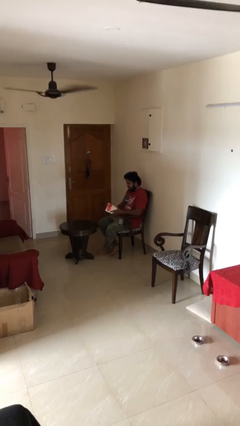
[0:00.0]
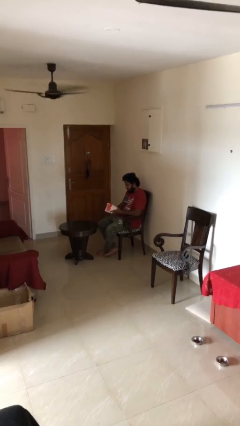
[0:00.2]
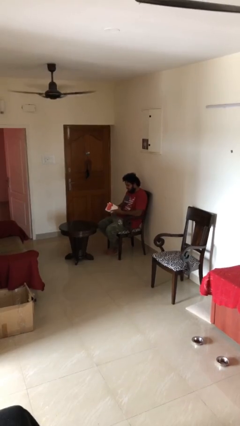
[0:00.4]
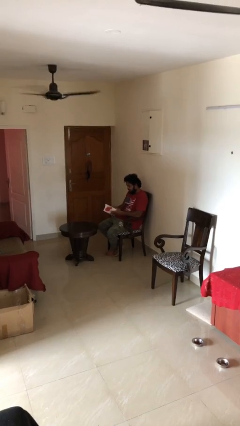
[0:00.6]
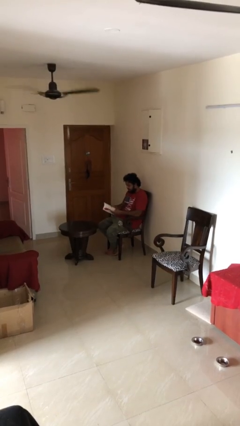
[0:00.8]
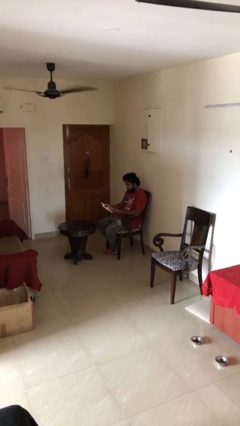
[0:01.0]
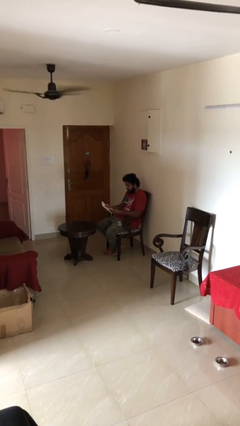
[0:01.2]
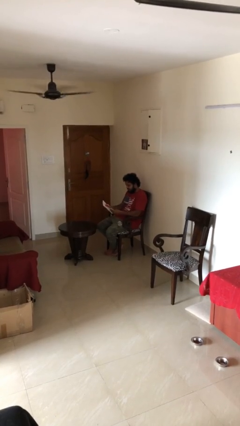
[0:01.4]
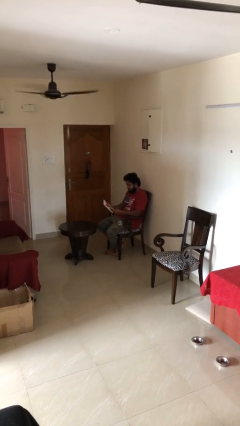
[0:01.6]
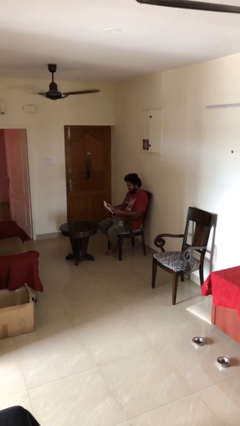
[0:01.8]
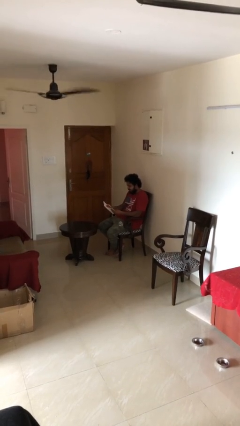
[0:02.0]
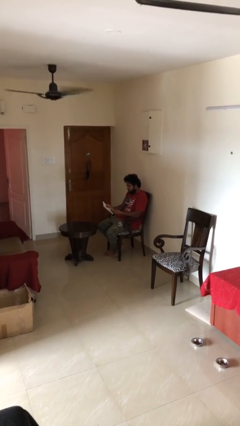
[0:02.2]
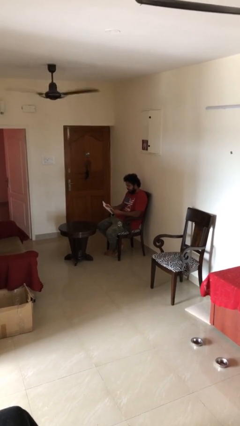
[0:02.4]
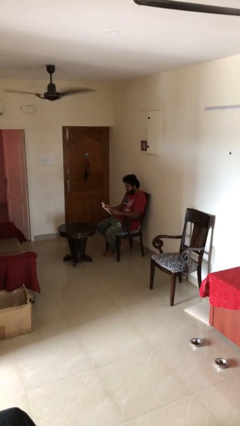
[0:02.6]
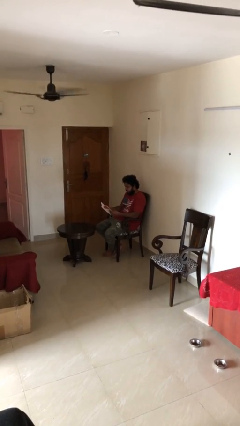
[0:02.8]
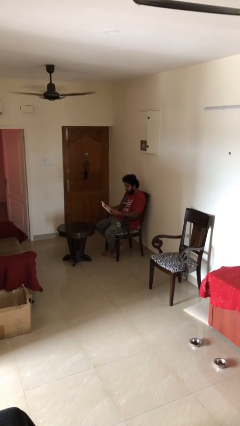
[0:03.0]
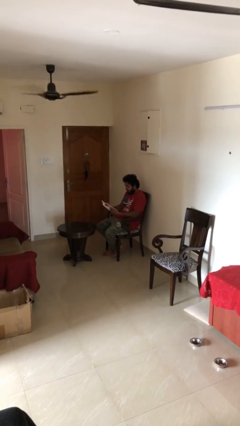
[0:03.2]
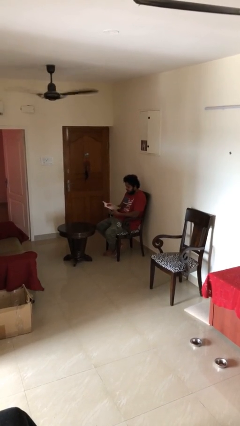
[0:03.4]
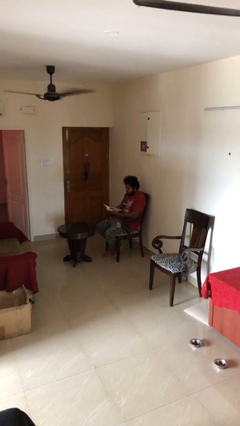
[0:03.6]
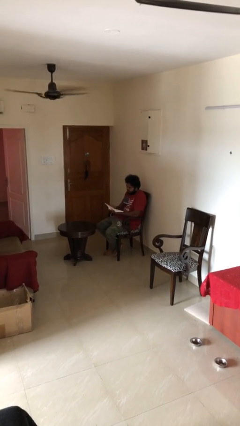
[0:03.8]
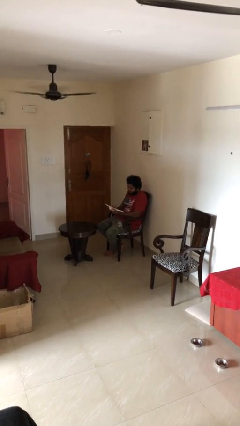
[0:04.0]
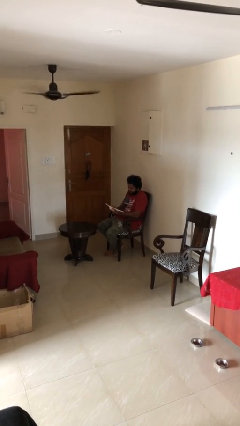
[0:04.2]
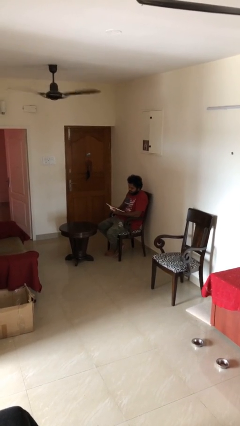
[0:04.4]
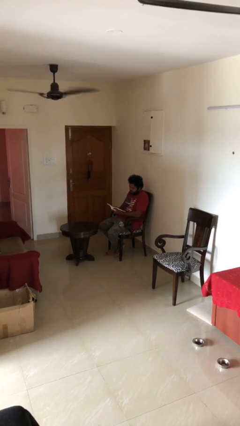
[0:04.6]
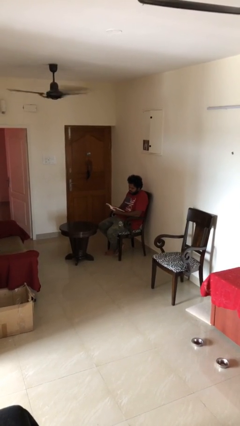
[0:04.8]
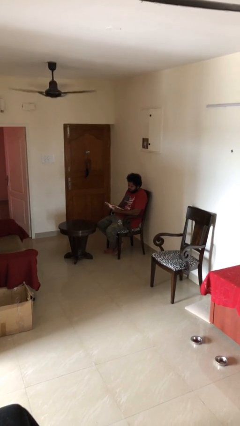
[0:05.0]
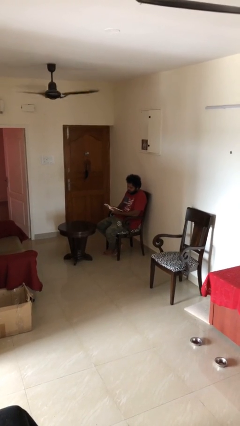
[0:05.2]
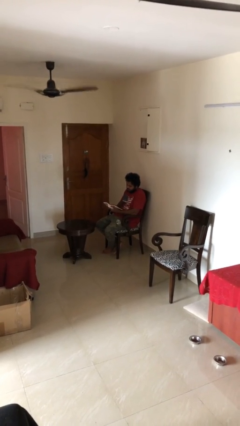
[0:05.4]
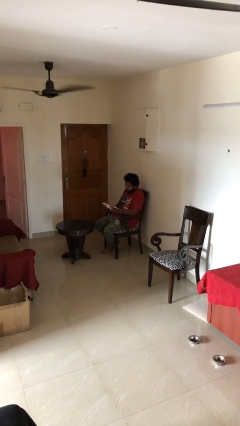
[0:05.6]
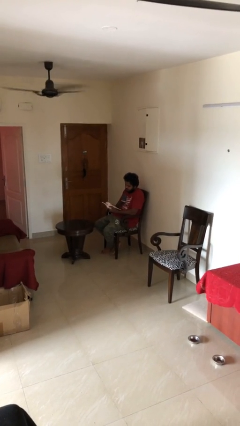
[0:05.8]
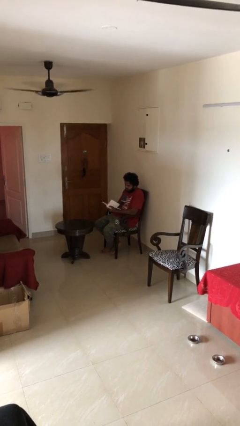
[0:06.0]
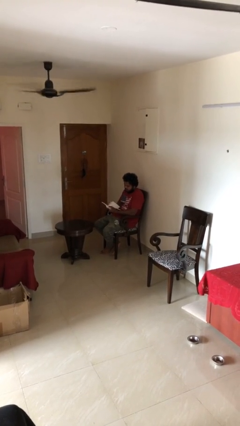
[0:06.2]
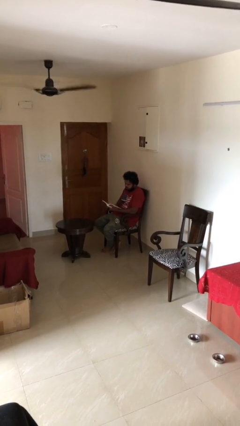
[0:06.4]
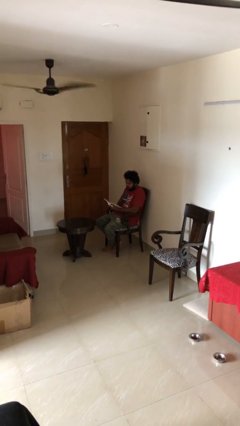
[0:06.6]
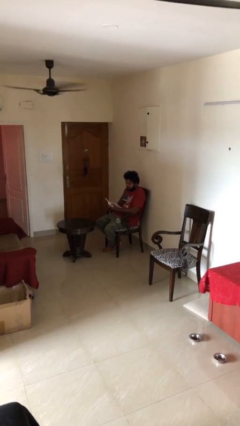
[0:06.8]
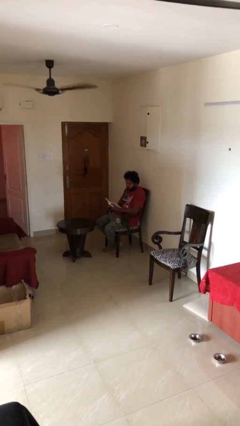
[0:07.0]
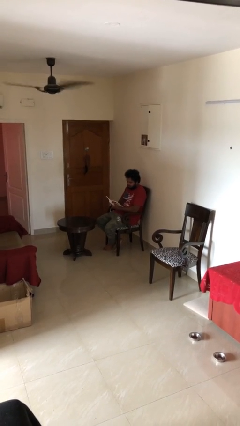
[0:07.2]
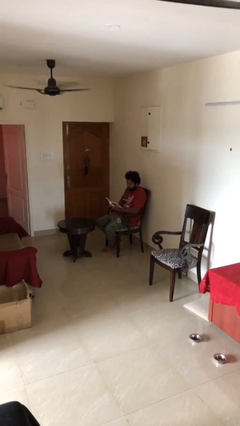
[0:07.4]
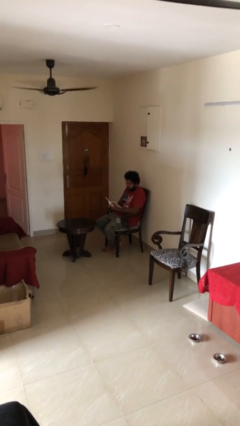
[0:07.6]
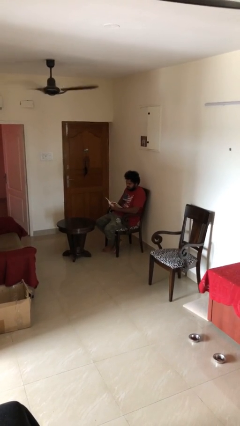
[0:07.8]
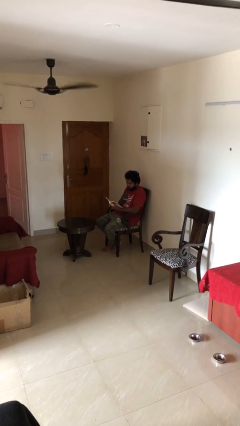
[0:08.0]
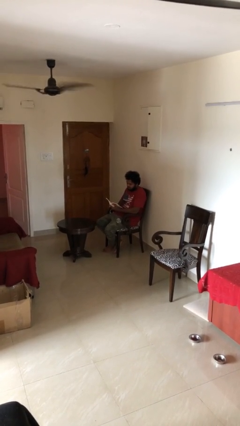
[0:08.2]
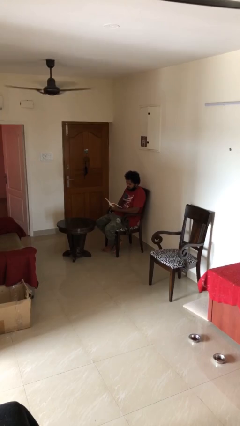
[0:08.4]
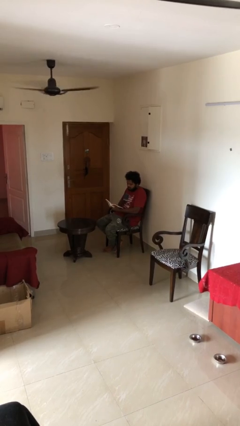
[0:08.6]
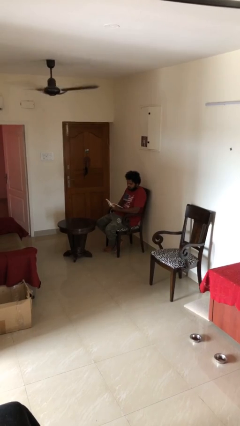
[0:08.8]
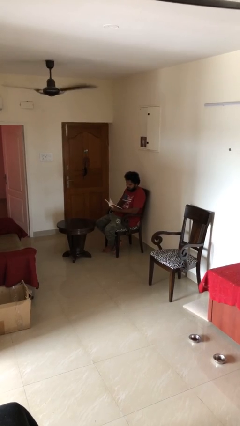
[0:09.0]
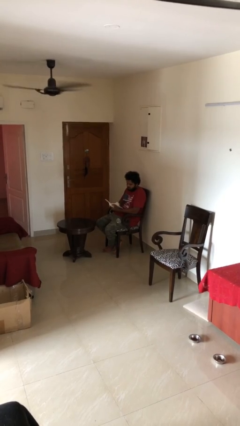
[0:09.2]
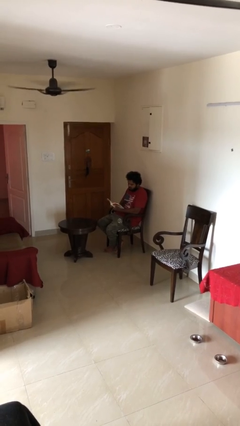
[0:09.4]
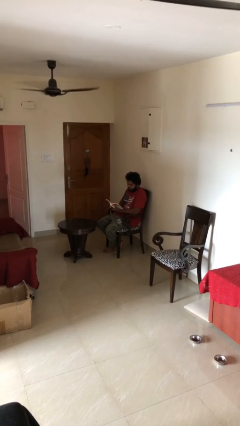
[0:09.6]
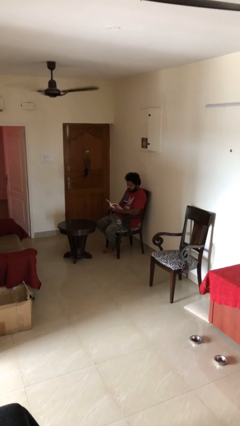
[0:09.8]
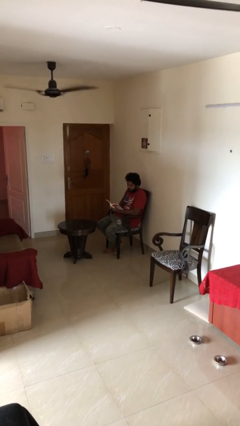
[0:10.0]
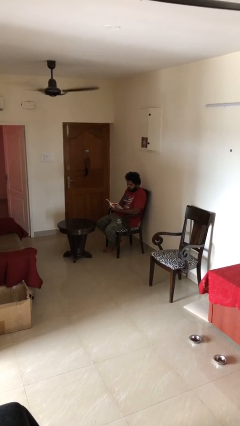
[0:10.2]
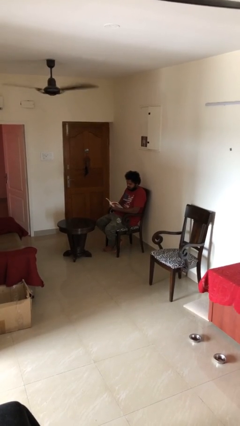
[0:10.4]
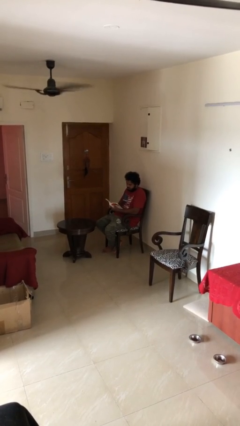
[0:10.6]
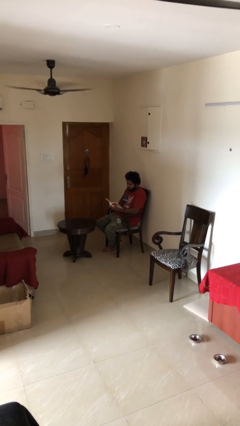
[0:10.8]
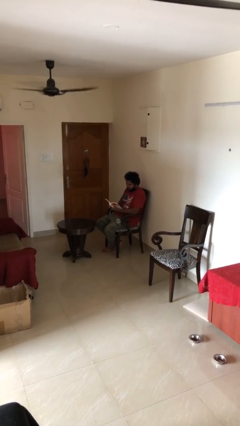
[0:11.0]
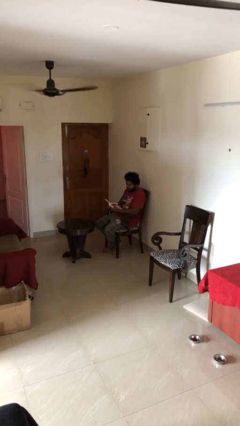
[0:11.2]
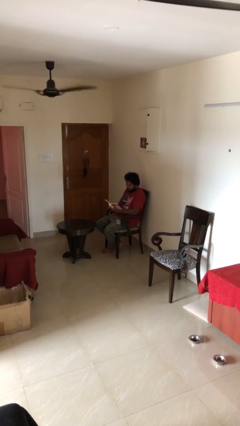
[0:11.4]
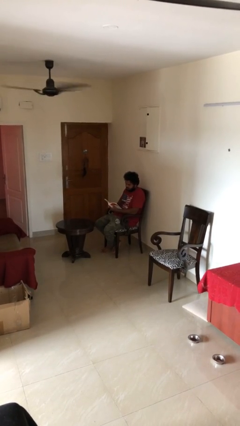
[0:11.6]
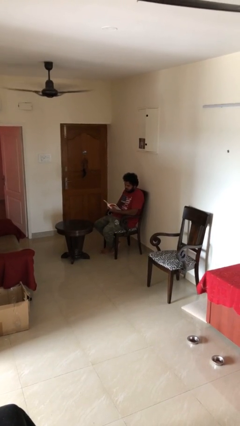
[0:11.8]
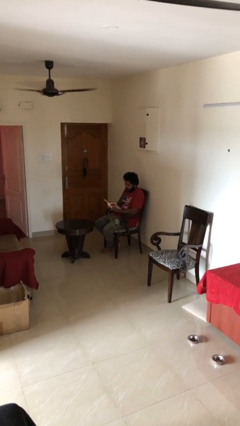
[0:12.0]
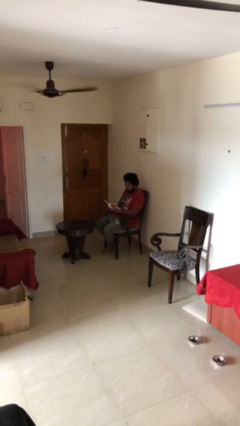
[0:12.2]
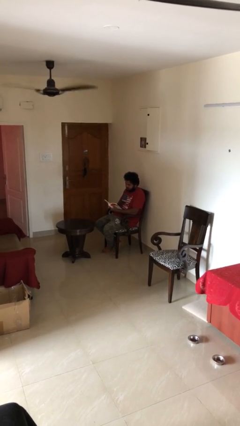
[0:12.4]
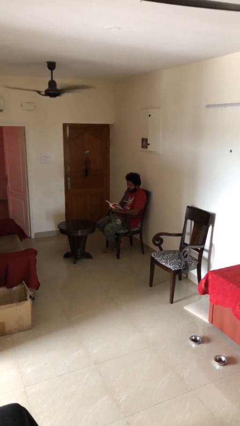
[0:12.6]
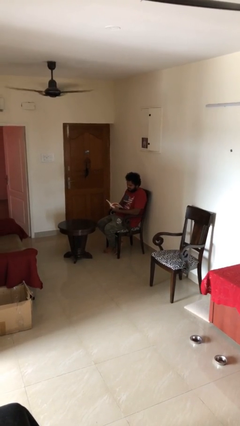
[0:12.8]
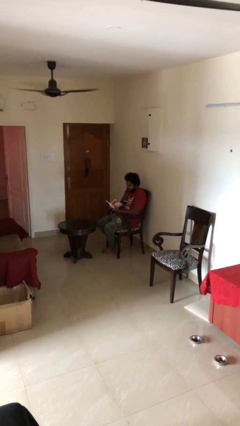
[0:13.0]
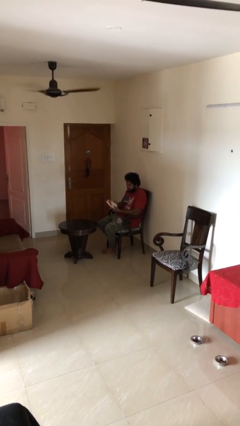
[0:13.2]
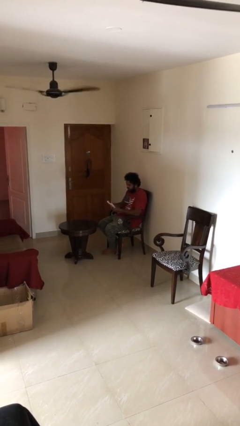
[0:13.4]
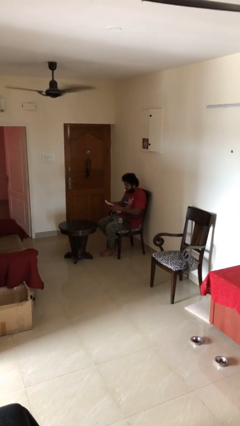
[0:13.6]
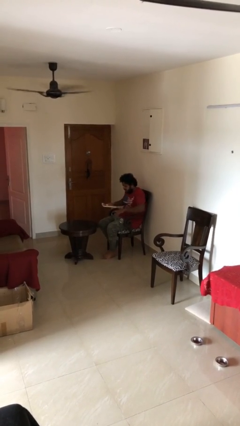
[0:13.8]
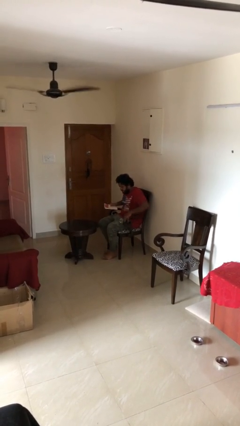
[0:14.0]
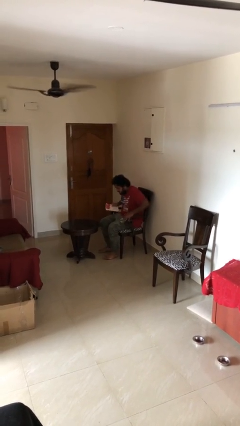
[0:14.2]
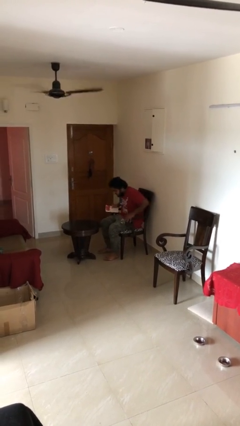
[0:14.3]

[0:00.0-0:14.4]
person reads document

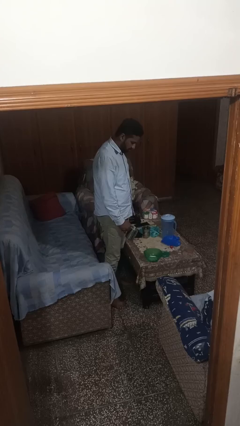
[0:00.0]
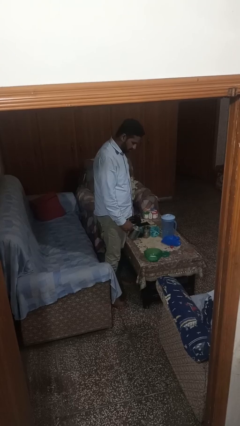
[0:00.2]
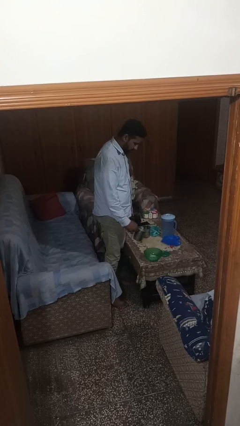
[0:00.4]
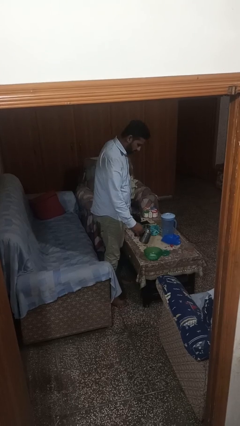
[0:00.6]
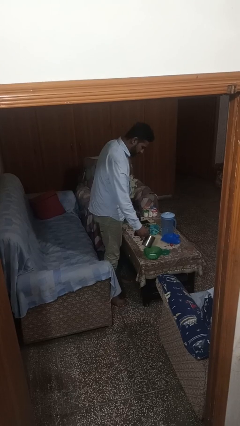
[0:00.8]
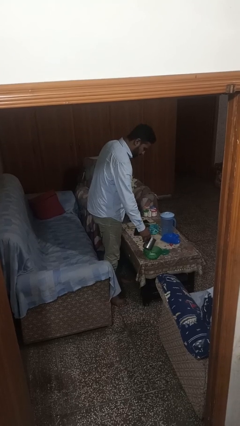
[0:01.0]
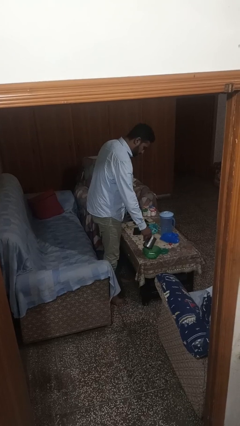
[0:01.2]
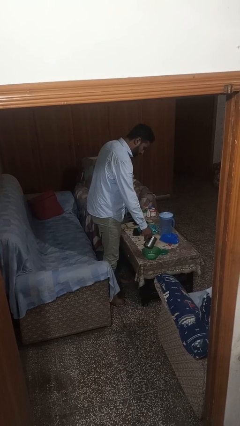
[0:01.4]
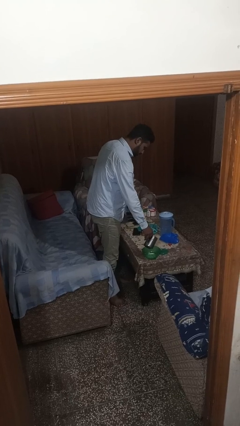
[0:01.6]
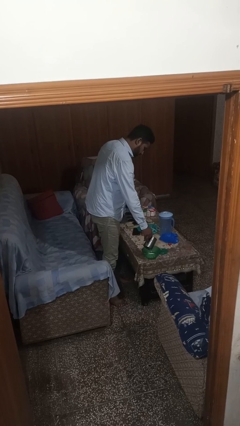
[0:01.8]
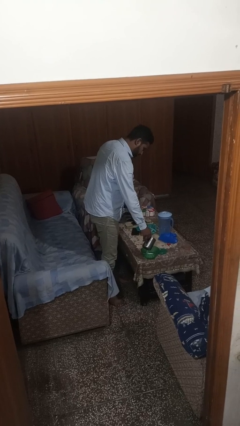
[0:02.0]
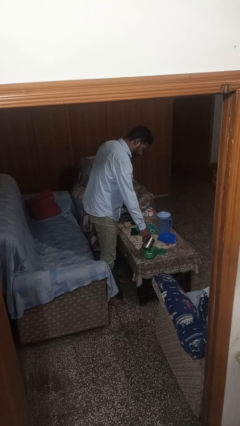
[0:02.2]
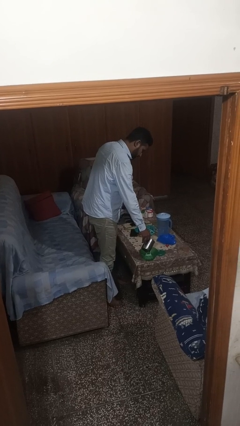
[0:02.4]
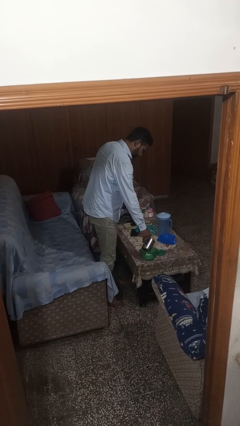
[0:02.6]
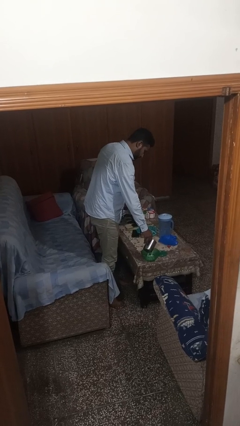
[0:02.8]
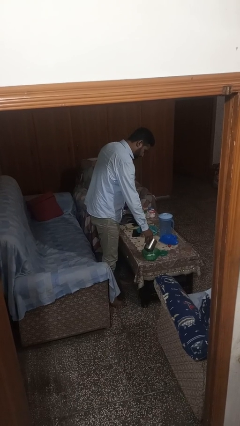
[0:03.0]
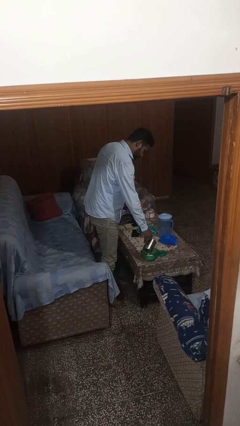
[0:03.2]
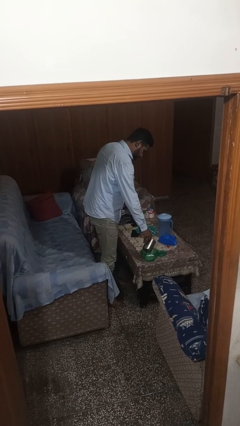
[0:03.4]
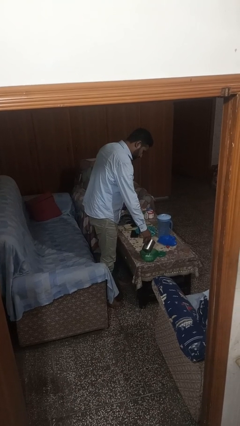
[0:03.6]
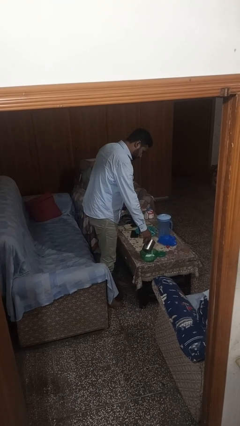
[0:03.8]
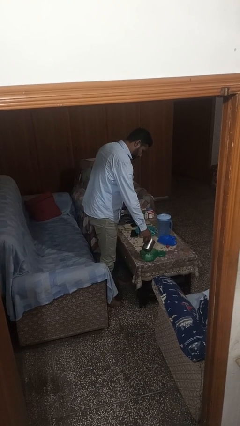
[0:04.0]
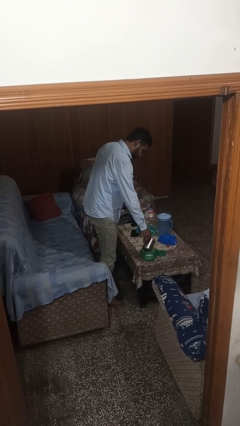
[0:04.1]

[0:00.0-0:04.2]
person pours into bowl
